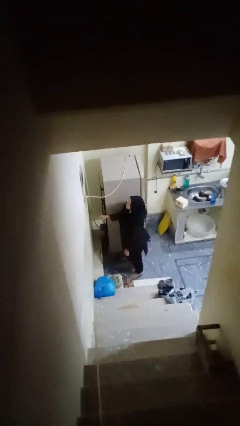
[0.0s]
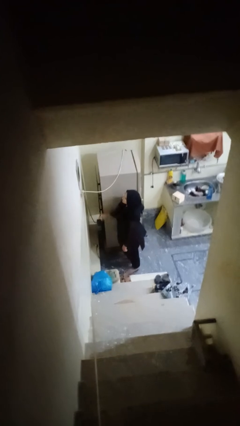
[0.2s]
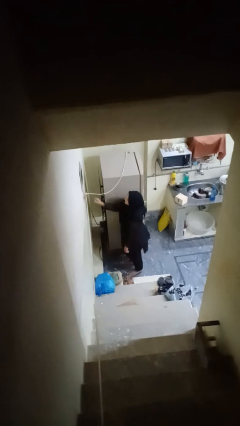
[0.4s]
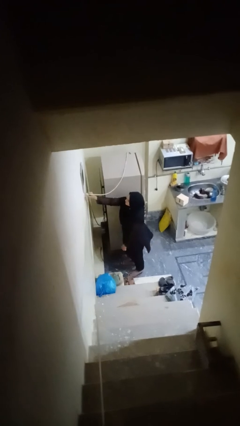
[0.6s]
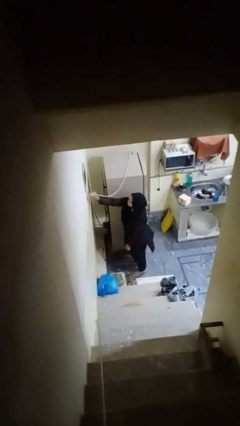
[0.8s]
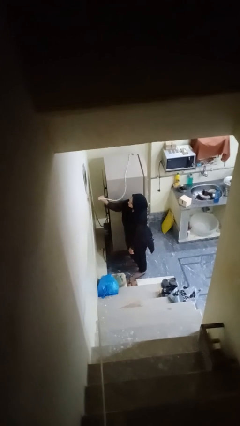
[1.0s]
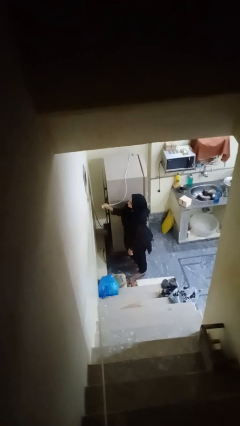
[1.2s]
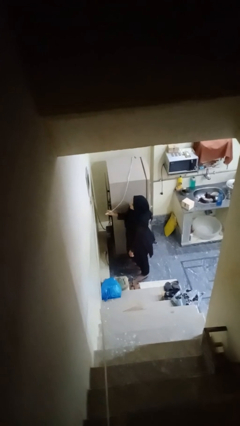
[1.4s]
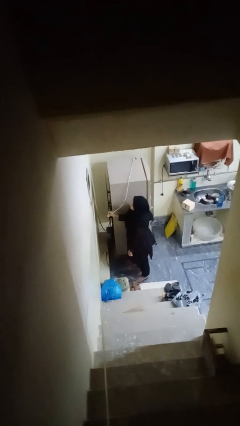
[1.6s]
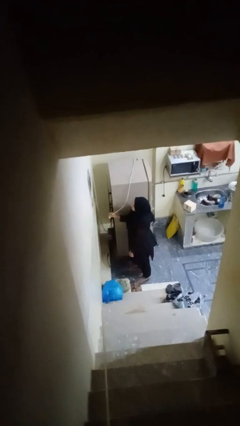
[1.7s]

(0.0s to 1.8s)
person unplugs from electrical socket

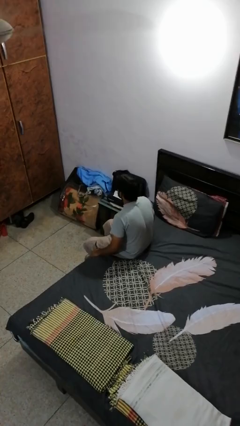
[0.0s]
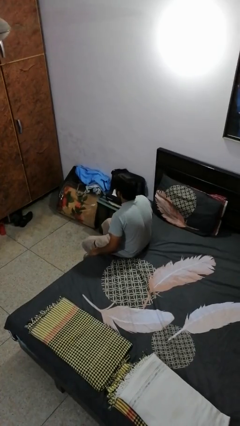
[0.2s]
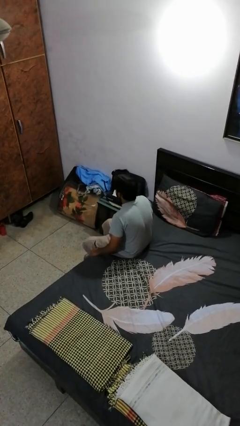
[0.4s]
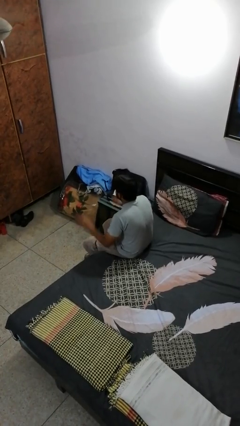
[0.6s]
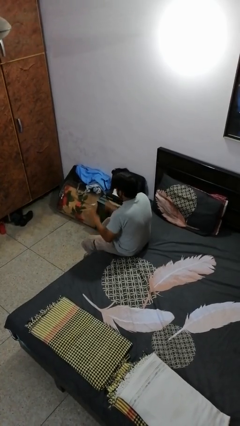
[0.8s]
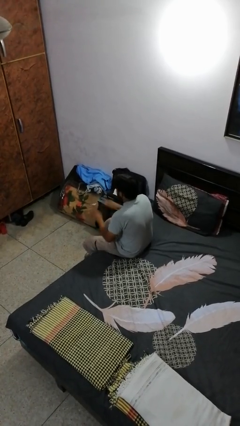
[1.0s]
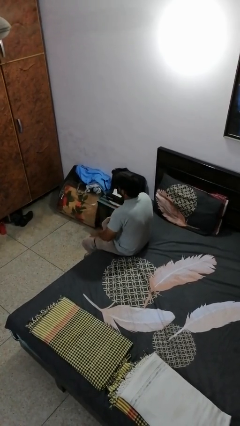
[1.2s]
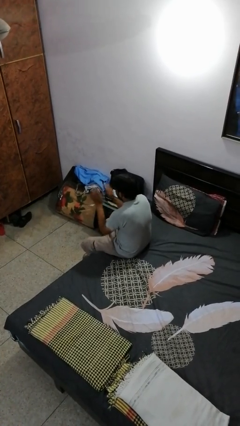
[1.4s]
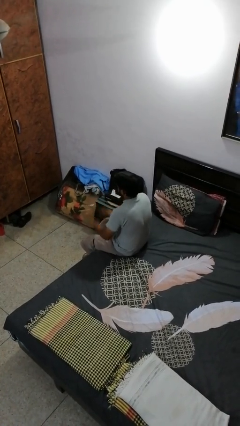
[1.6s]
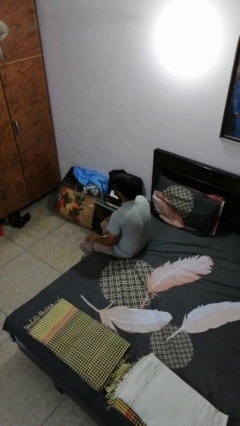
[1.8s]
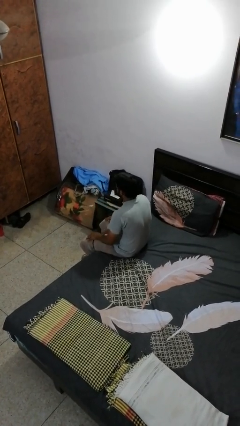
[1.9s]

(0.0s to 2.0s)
person slaps hands on thighs

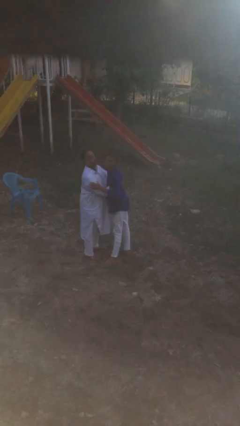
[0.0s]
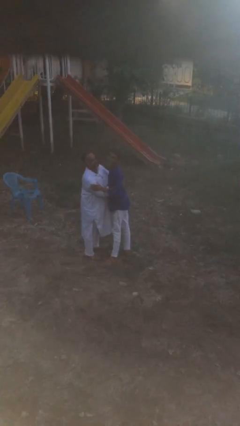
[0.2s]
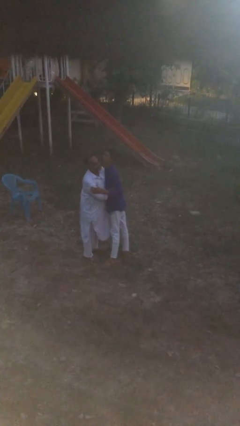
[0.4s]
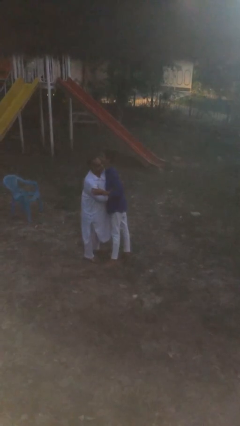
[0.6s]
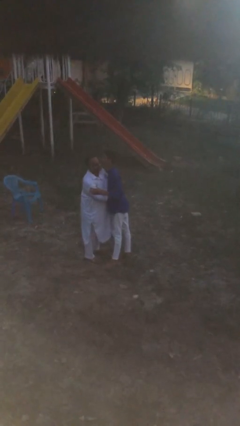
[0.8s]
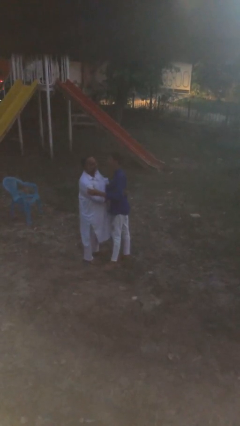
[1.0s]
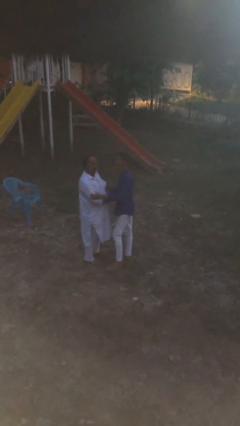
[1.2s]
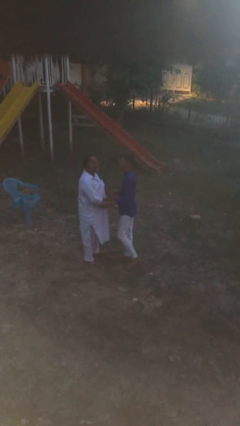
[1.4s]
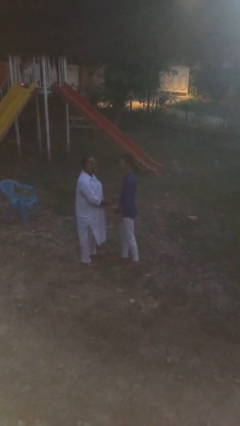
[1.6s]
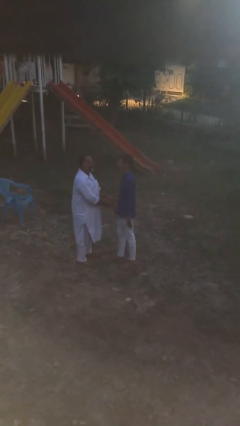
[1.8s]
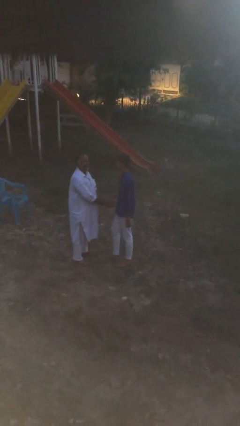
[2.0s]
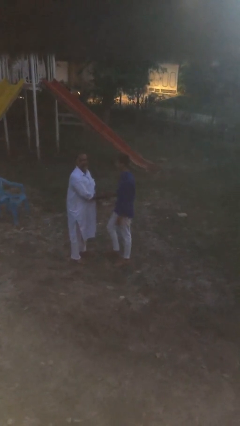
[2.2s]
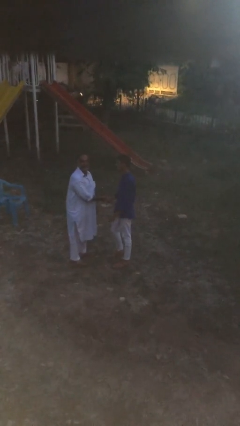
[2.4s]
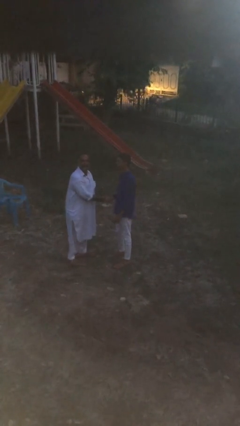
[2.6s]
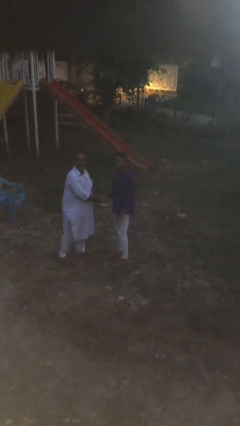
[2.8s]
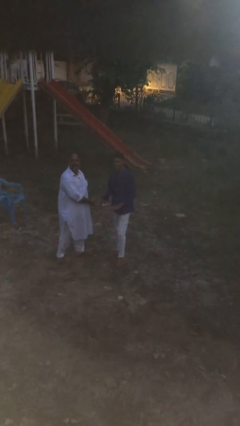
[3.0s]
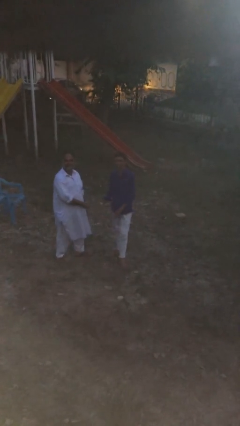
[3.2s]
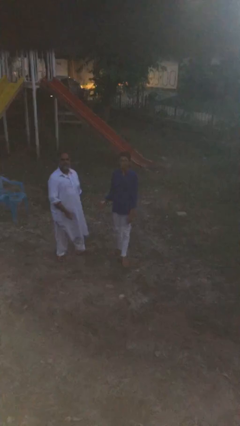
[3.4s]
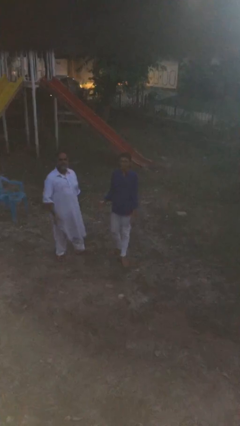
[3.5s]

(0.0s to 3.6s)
person talks to person

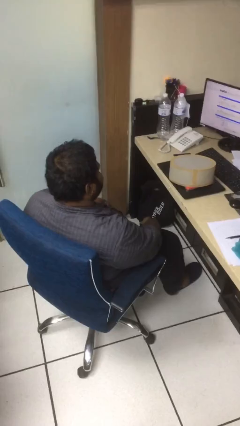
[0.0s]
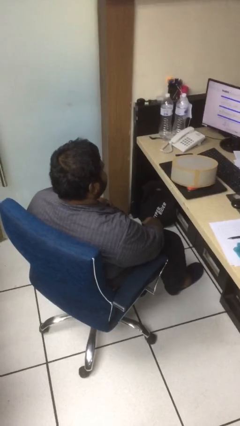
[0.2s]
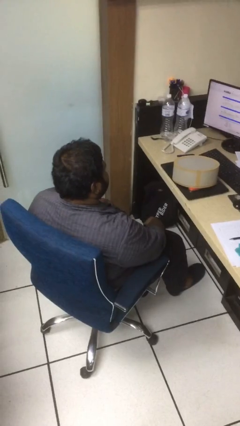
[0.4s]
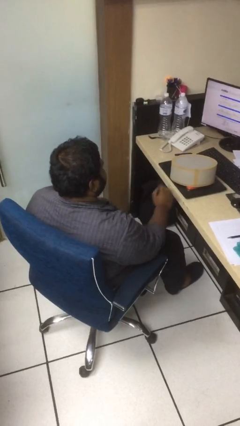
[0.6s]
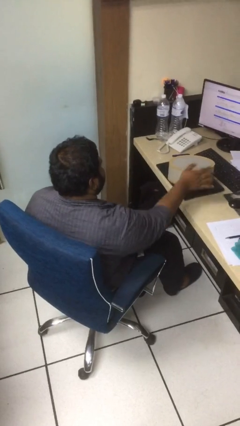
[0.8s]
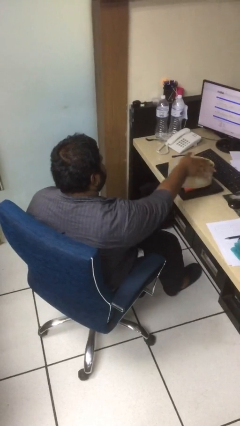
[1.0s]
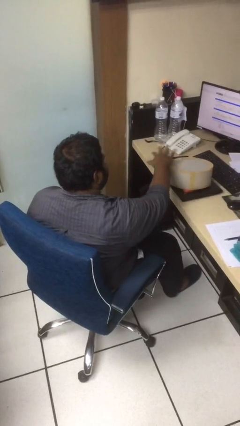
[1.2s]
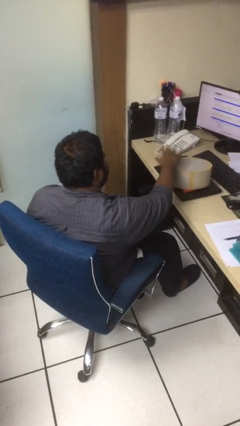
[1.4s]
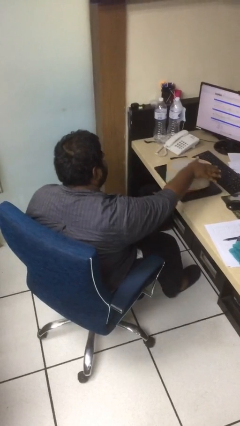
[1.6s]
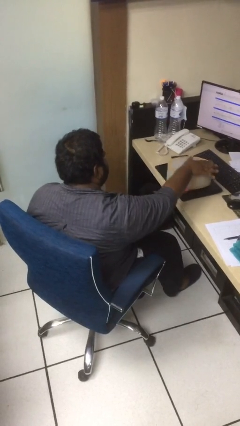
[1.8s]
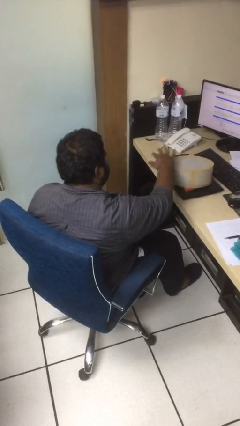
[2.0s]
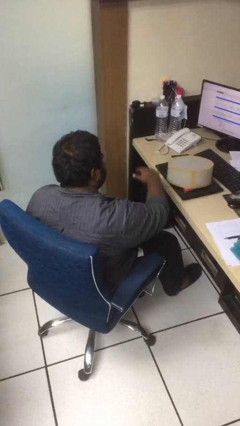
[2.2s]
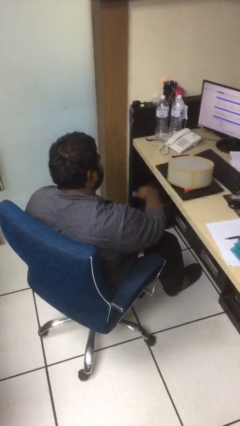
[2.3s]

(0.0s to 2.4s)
person waves hand over object

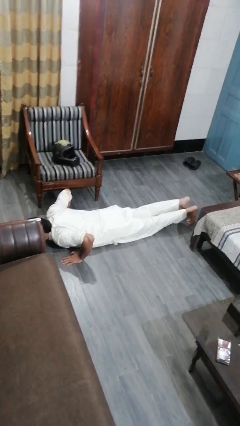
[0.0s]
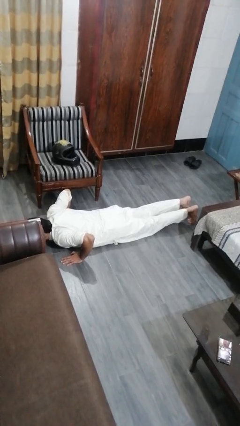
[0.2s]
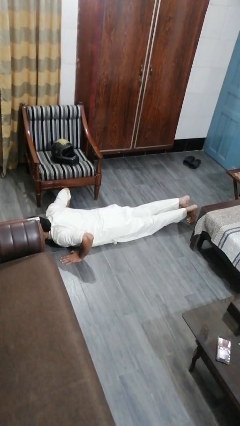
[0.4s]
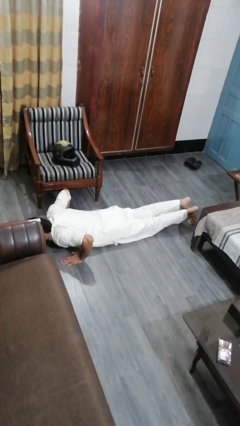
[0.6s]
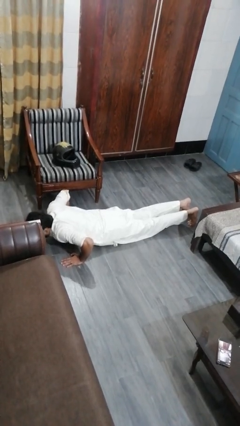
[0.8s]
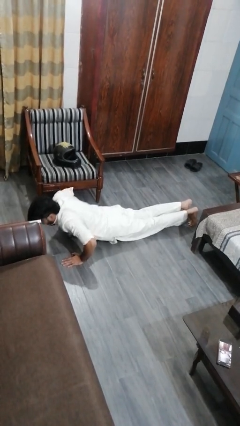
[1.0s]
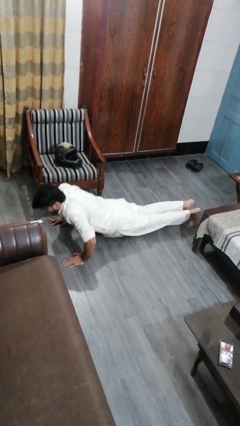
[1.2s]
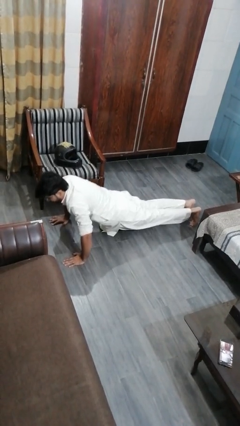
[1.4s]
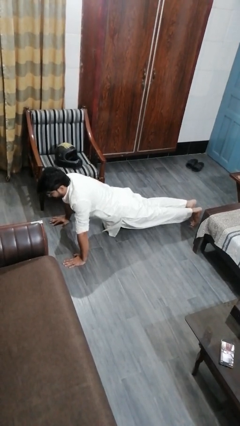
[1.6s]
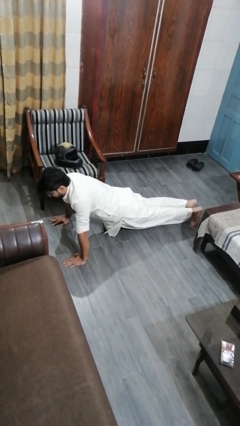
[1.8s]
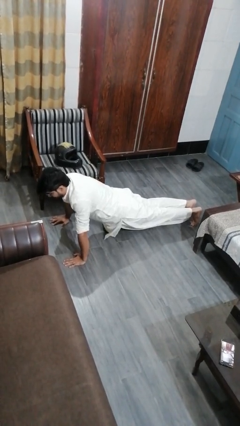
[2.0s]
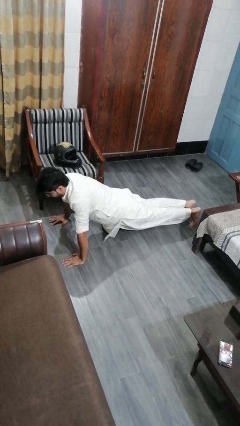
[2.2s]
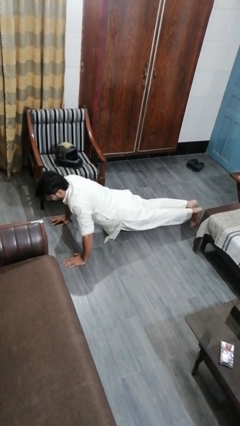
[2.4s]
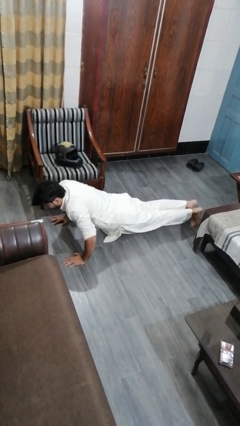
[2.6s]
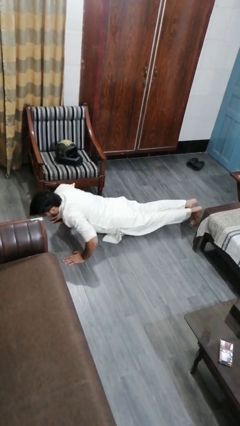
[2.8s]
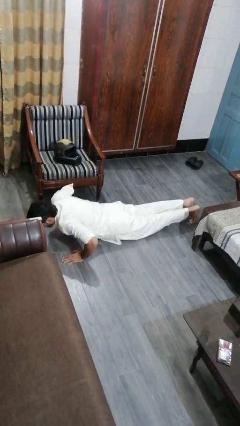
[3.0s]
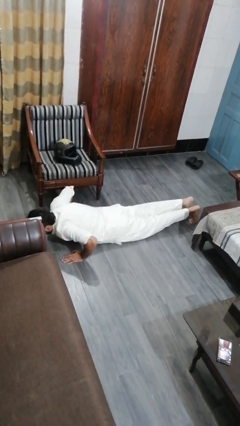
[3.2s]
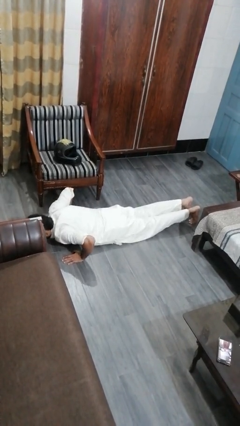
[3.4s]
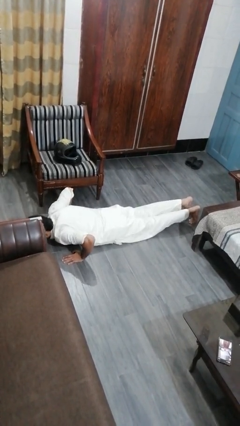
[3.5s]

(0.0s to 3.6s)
person exercises with pushup

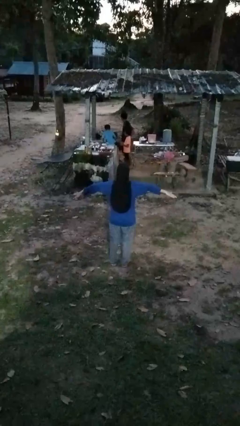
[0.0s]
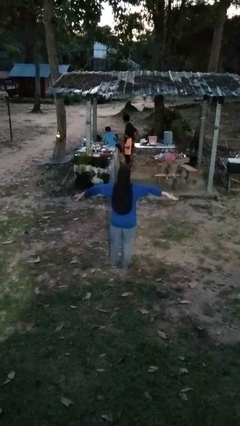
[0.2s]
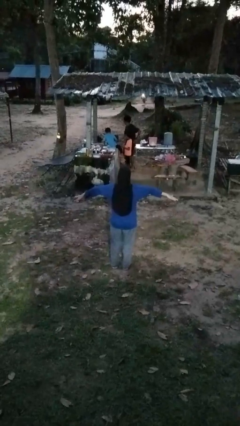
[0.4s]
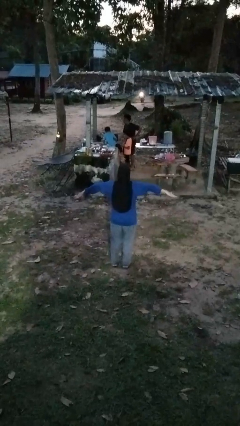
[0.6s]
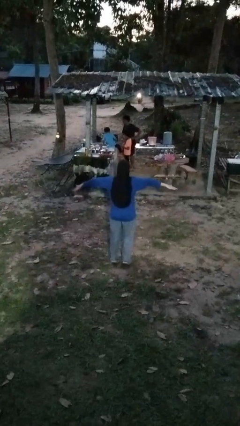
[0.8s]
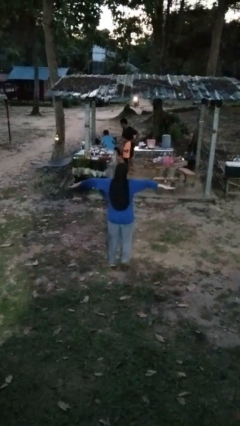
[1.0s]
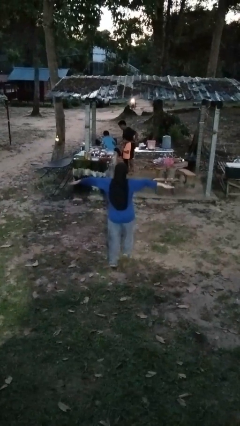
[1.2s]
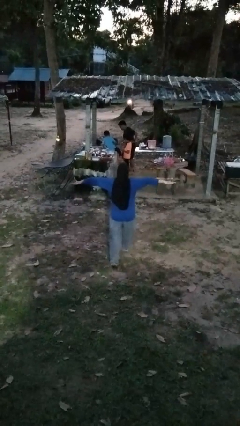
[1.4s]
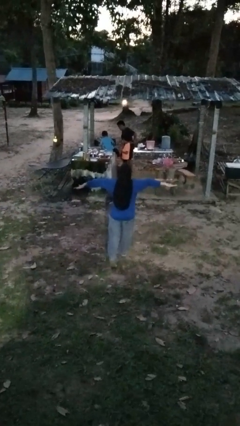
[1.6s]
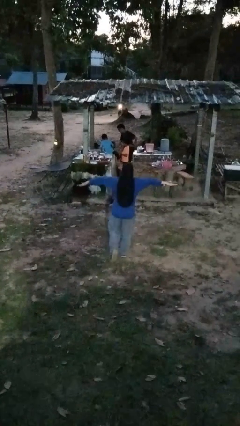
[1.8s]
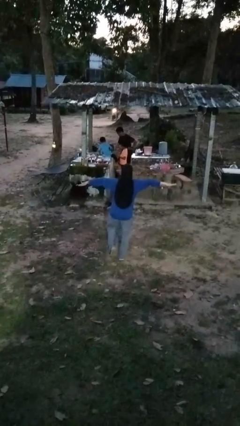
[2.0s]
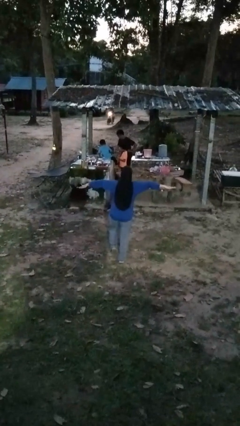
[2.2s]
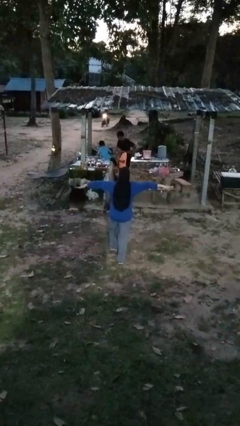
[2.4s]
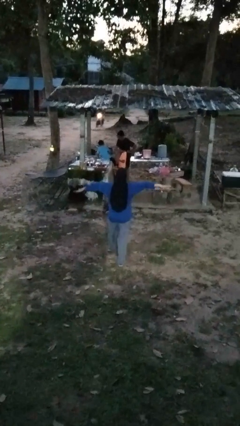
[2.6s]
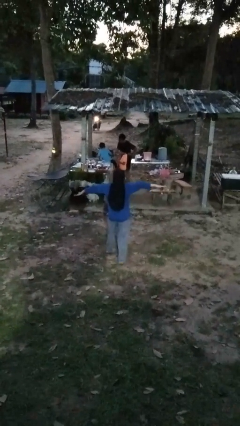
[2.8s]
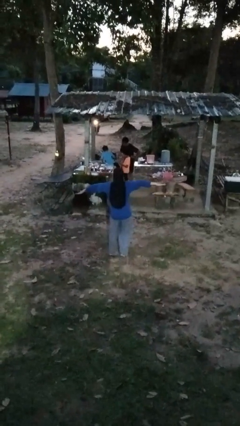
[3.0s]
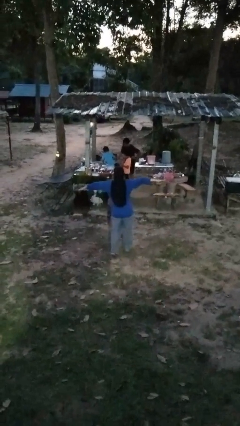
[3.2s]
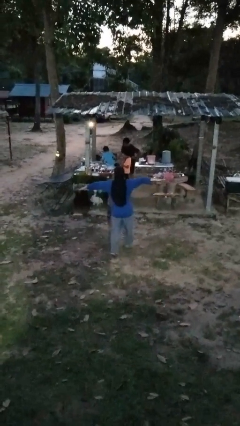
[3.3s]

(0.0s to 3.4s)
person walks tiptoe

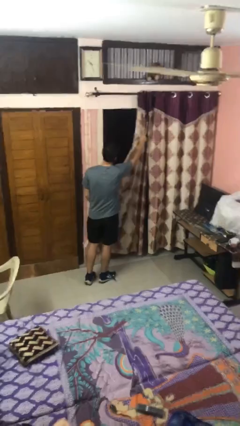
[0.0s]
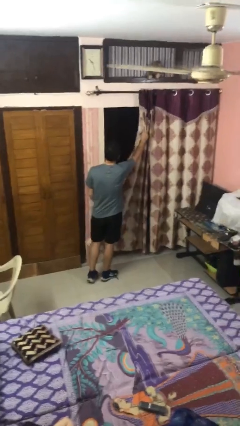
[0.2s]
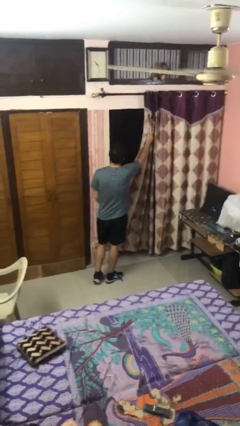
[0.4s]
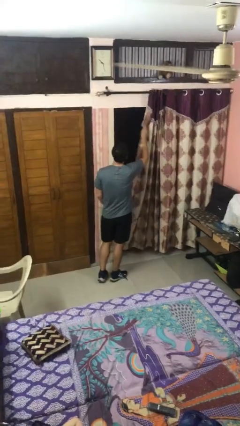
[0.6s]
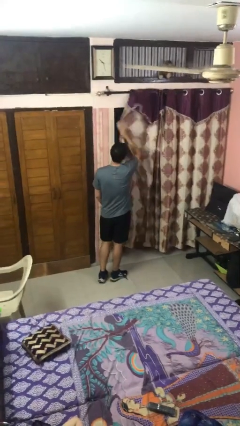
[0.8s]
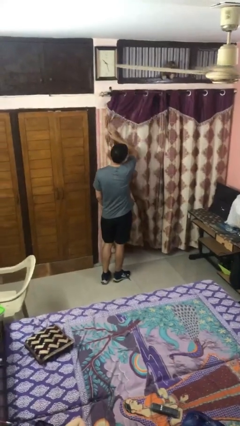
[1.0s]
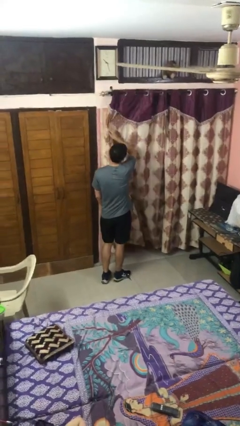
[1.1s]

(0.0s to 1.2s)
person closes curtains
